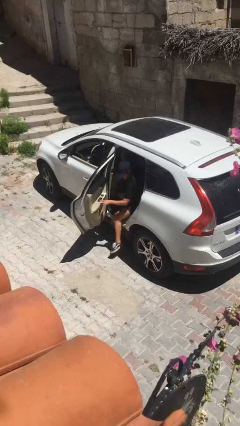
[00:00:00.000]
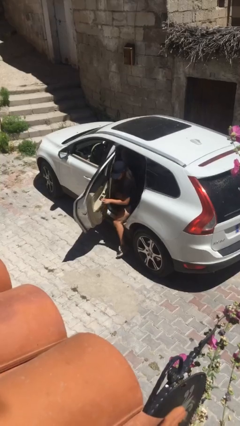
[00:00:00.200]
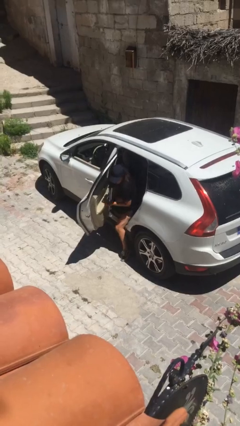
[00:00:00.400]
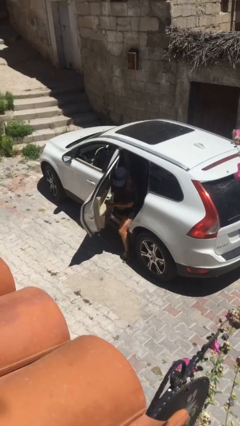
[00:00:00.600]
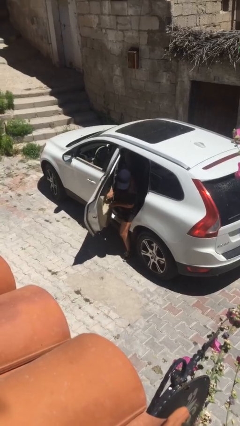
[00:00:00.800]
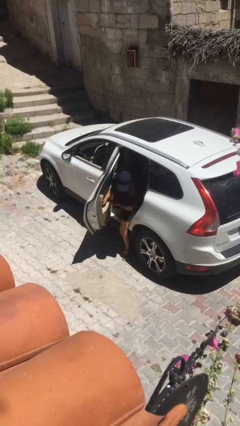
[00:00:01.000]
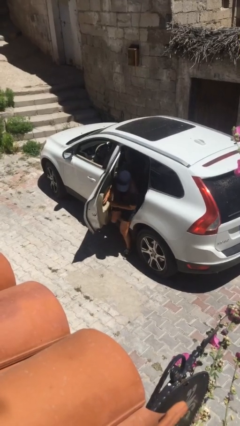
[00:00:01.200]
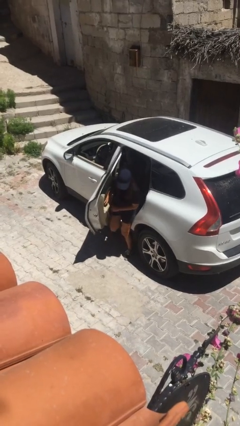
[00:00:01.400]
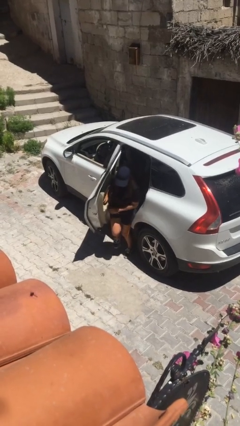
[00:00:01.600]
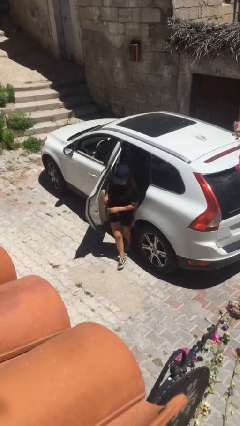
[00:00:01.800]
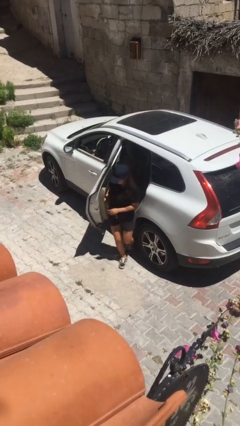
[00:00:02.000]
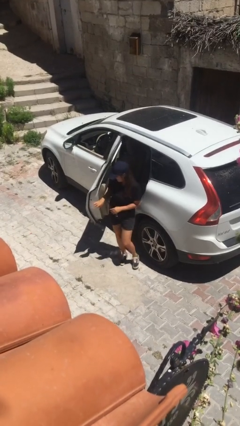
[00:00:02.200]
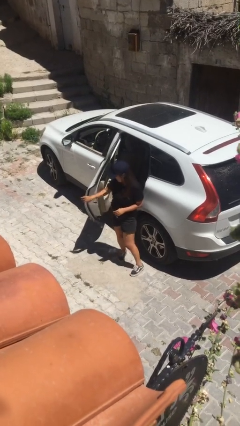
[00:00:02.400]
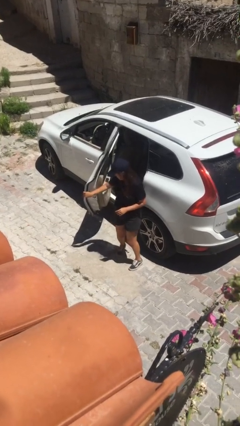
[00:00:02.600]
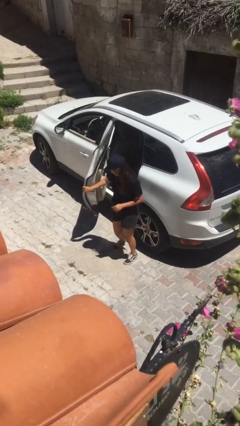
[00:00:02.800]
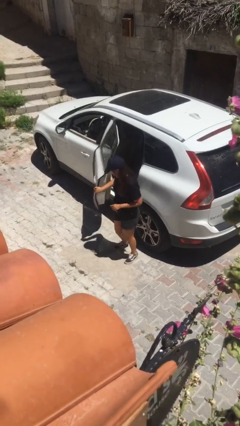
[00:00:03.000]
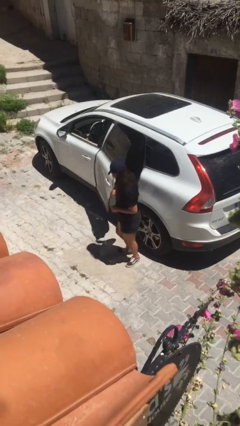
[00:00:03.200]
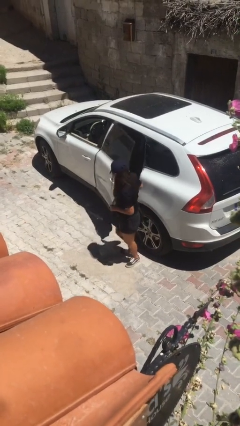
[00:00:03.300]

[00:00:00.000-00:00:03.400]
person exits car

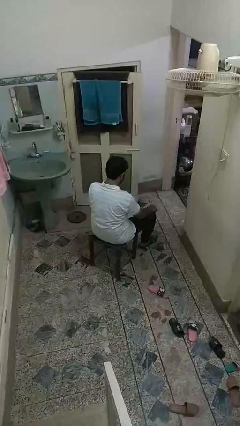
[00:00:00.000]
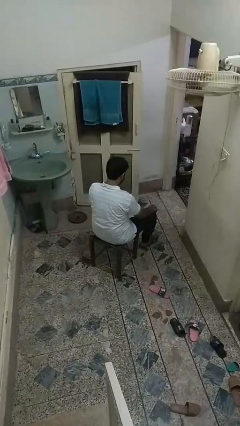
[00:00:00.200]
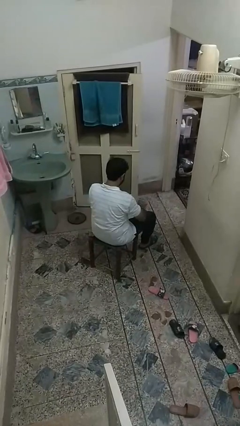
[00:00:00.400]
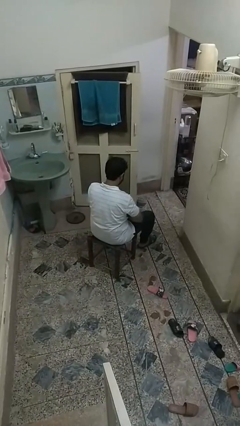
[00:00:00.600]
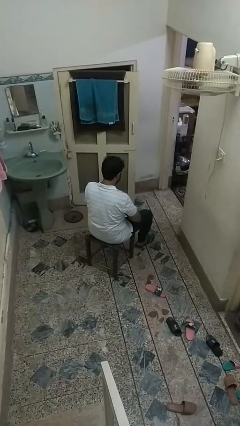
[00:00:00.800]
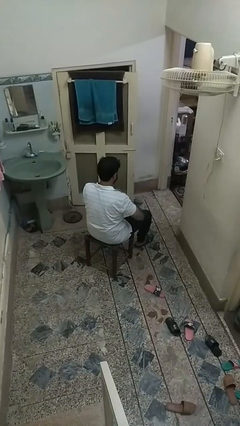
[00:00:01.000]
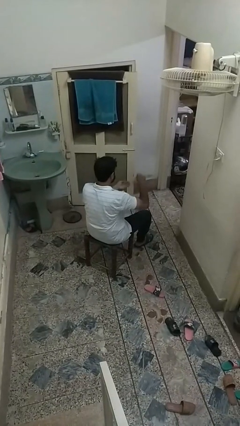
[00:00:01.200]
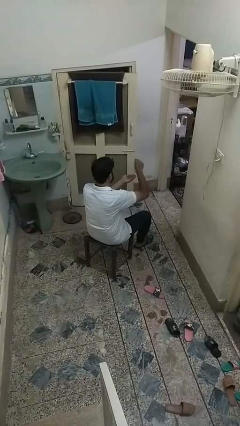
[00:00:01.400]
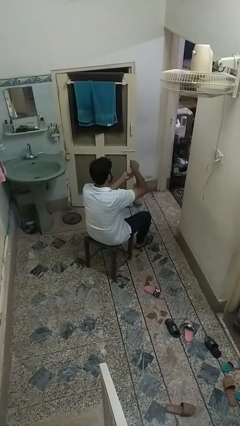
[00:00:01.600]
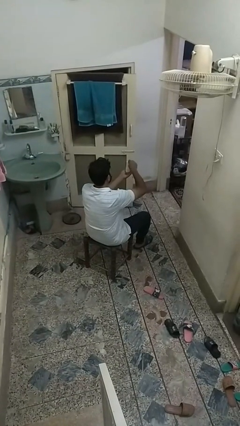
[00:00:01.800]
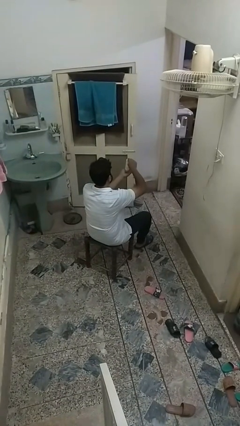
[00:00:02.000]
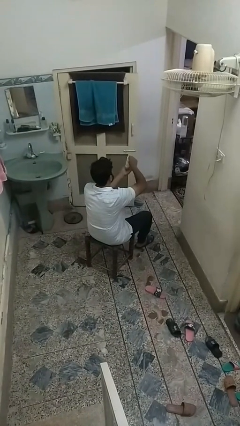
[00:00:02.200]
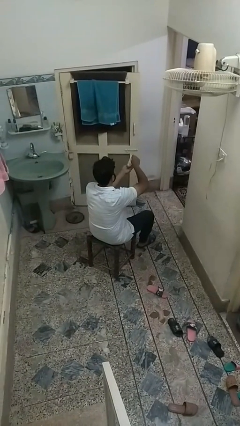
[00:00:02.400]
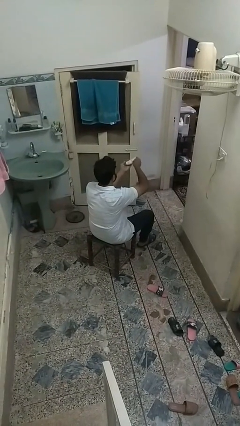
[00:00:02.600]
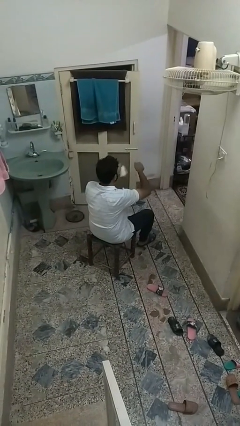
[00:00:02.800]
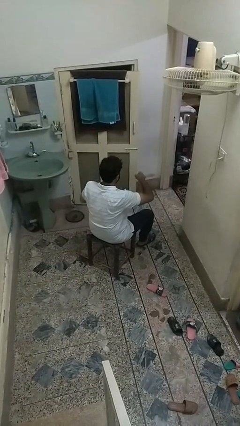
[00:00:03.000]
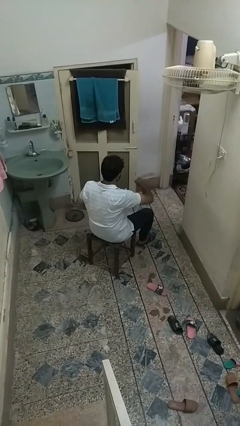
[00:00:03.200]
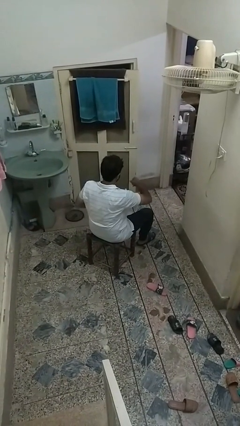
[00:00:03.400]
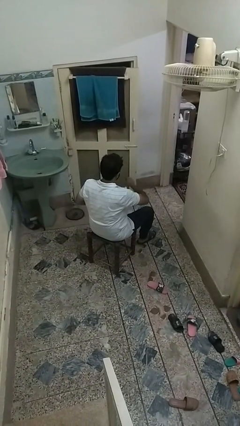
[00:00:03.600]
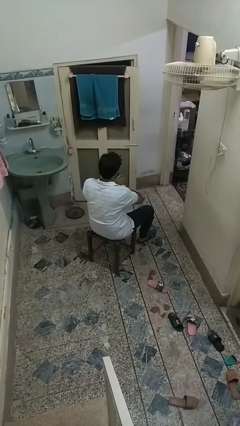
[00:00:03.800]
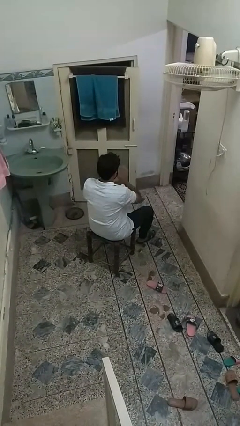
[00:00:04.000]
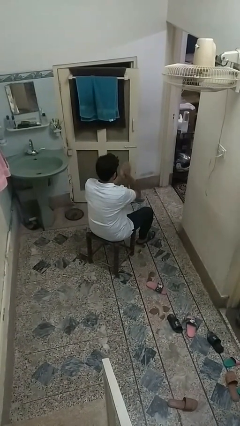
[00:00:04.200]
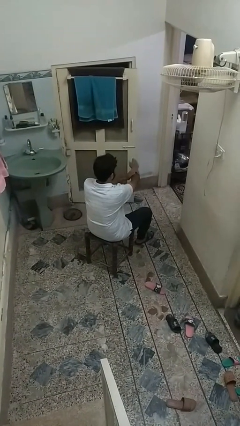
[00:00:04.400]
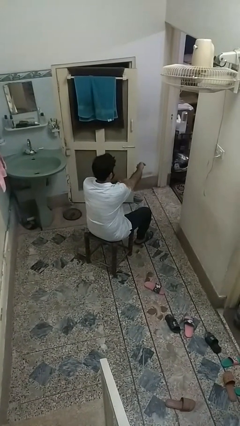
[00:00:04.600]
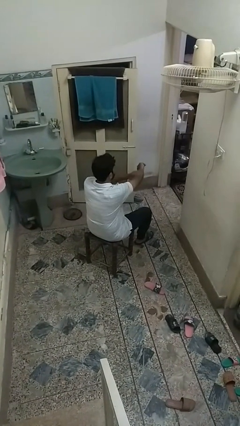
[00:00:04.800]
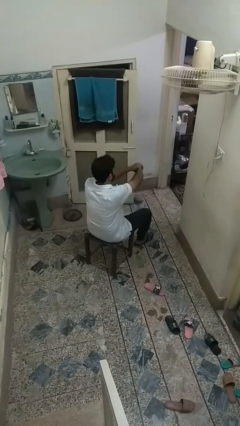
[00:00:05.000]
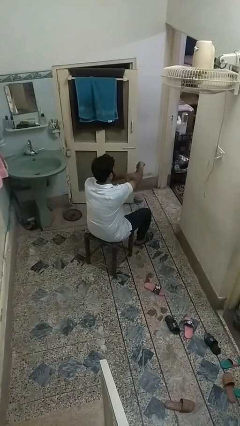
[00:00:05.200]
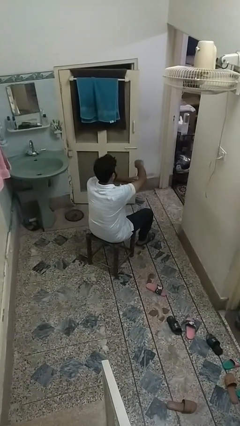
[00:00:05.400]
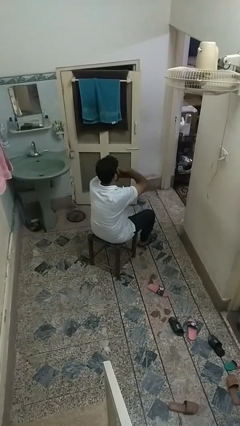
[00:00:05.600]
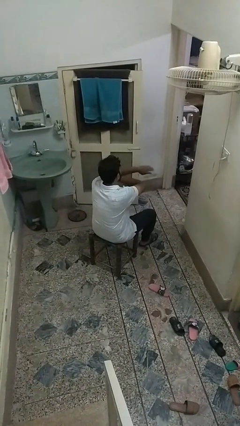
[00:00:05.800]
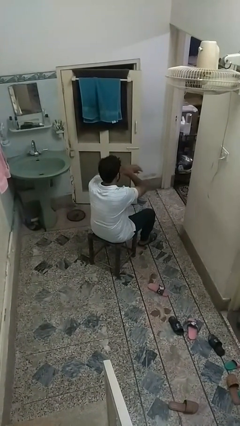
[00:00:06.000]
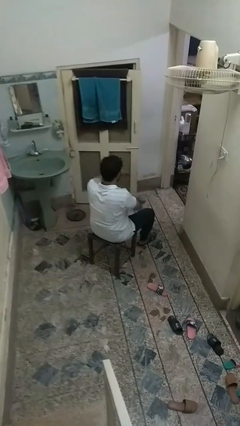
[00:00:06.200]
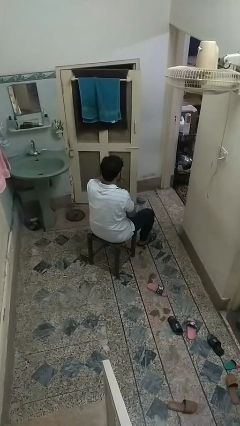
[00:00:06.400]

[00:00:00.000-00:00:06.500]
person applies sunscreen

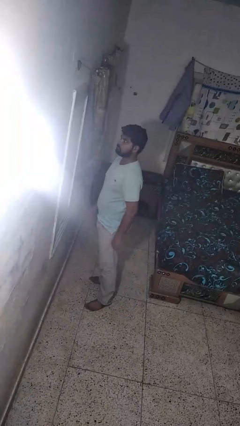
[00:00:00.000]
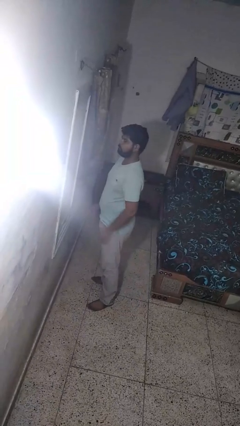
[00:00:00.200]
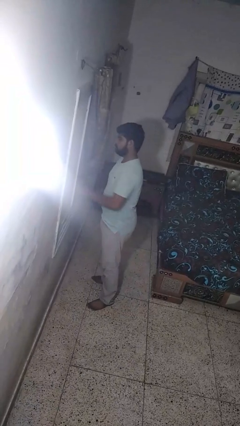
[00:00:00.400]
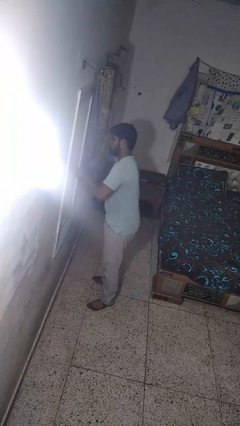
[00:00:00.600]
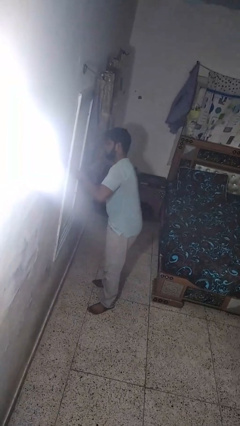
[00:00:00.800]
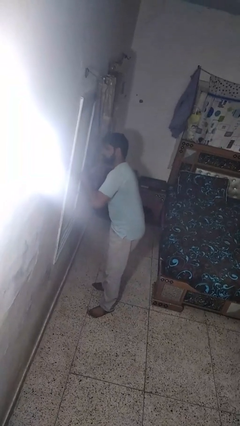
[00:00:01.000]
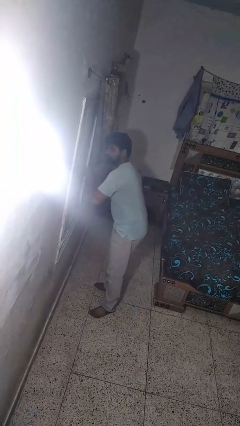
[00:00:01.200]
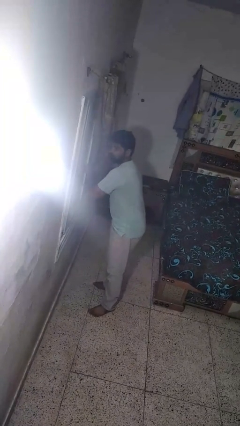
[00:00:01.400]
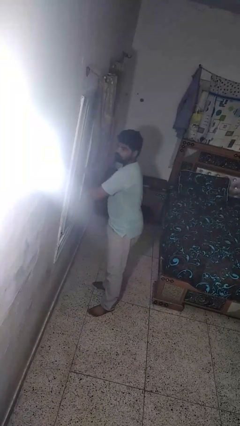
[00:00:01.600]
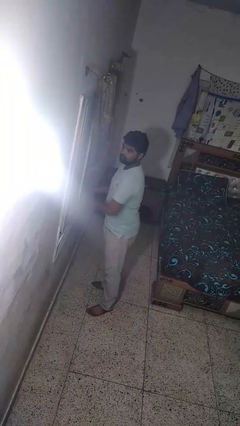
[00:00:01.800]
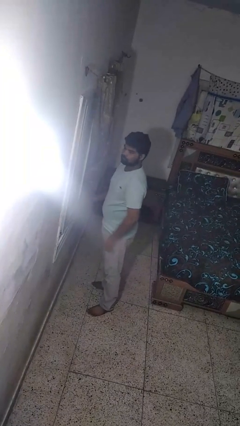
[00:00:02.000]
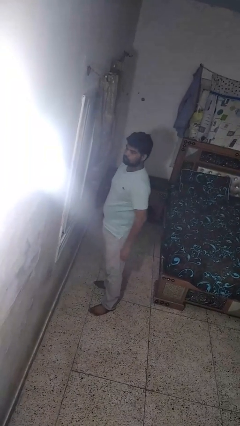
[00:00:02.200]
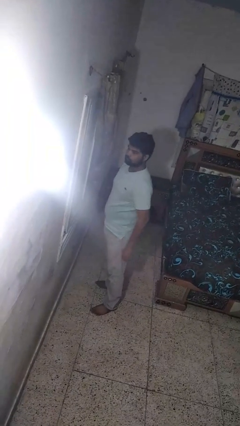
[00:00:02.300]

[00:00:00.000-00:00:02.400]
person opens sliding door

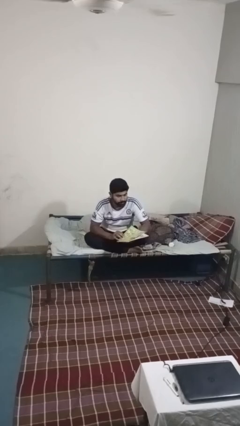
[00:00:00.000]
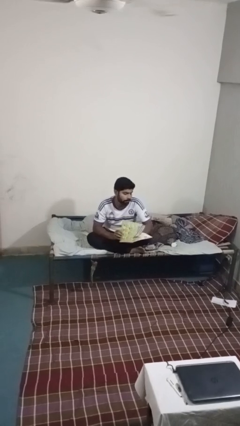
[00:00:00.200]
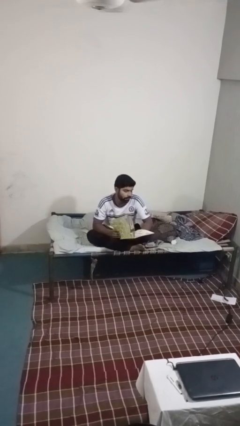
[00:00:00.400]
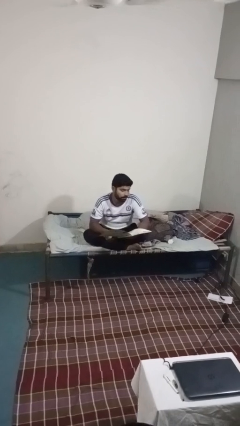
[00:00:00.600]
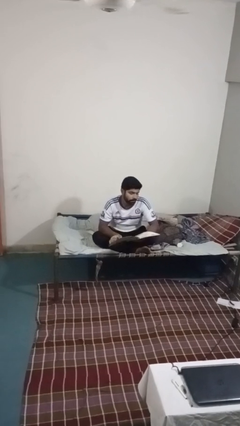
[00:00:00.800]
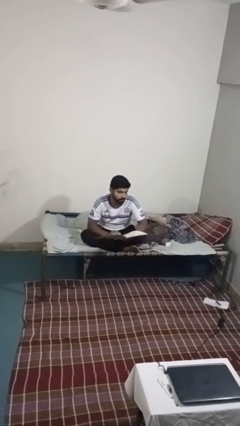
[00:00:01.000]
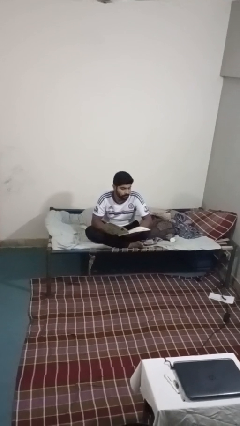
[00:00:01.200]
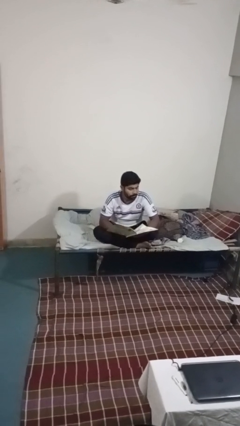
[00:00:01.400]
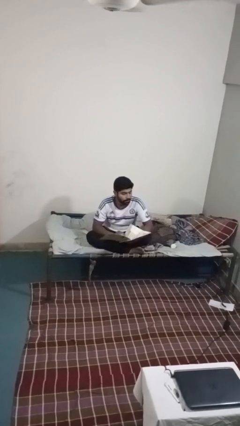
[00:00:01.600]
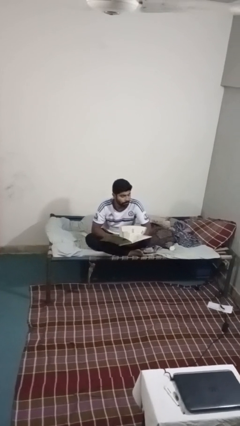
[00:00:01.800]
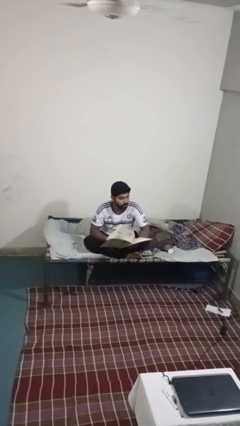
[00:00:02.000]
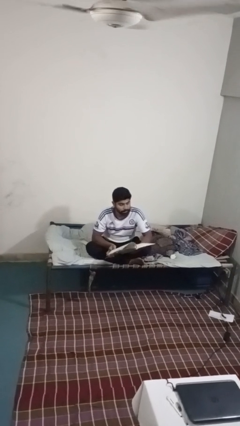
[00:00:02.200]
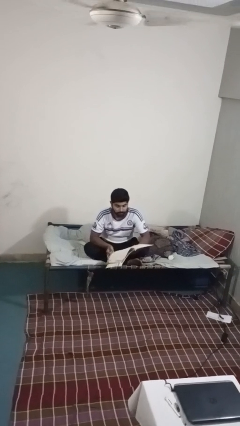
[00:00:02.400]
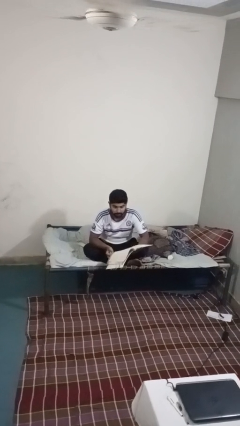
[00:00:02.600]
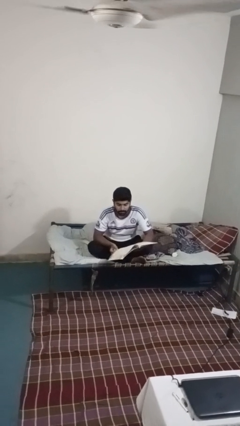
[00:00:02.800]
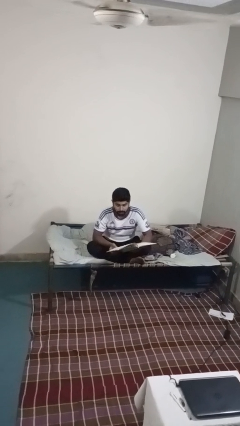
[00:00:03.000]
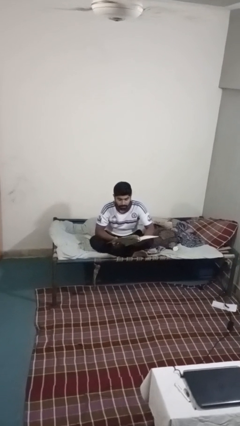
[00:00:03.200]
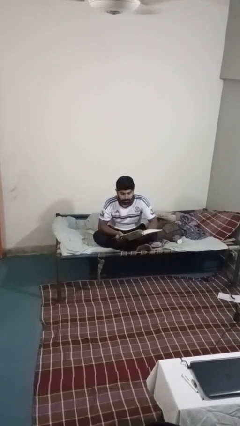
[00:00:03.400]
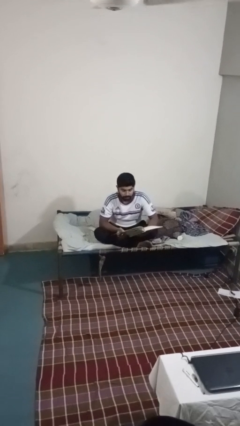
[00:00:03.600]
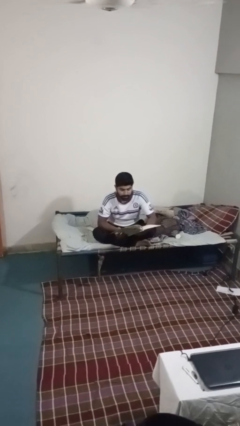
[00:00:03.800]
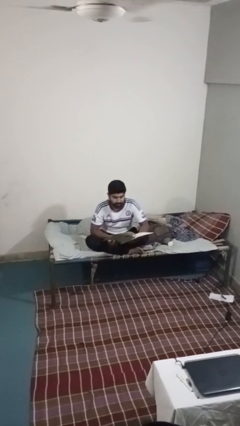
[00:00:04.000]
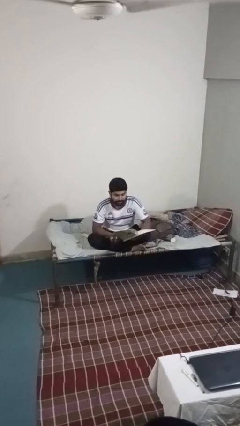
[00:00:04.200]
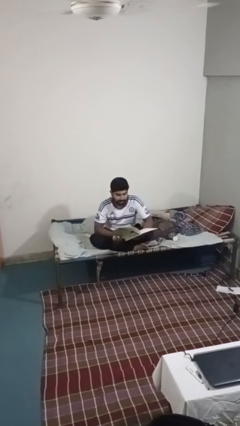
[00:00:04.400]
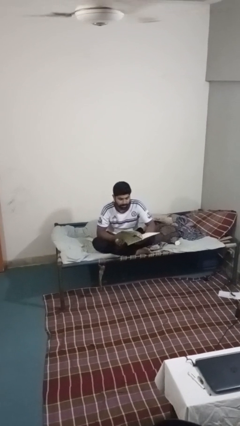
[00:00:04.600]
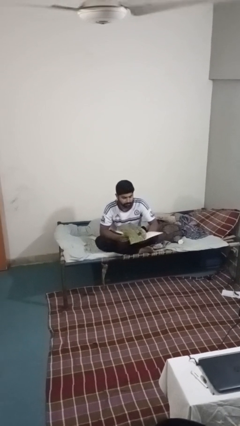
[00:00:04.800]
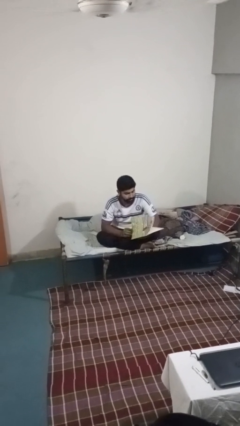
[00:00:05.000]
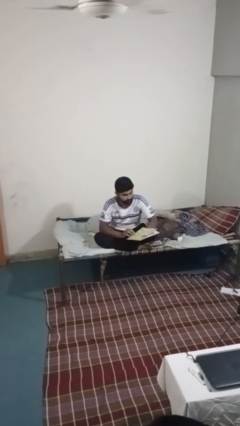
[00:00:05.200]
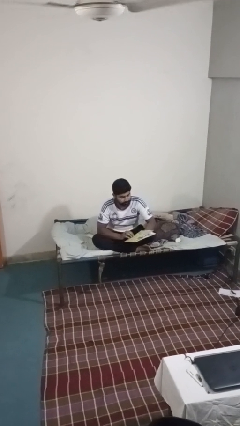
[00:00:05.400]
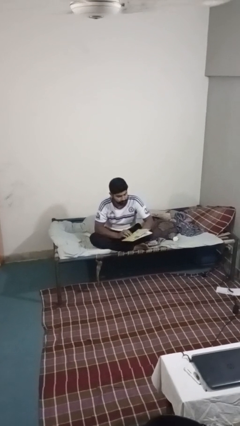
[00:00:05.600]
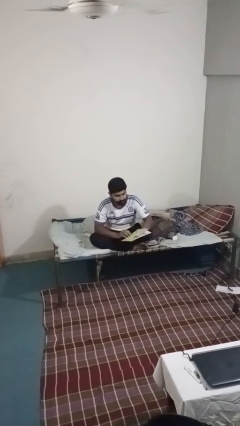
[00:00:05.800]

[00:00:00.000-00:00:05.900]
person reads magazine
